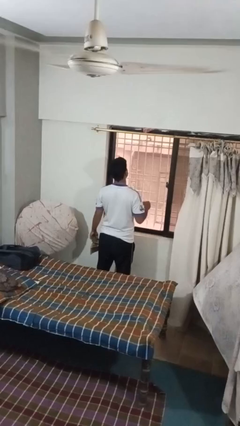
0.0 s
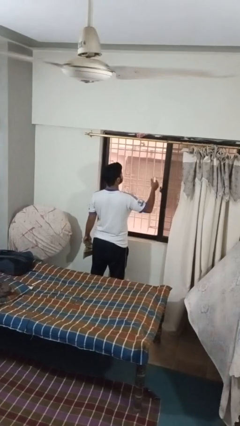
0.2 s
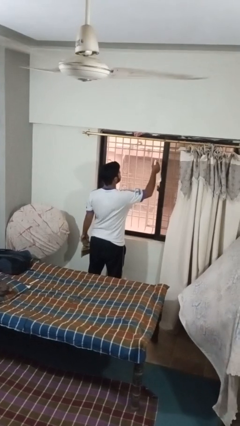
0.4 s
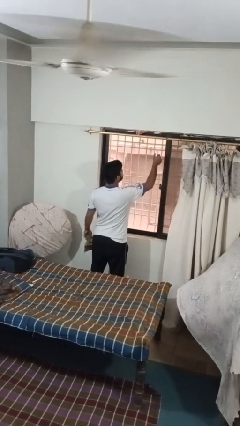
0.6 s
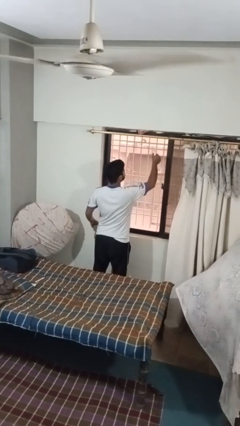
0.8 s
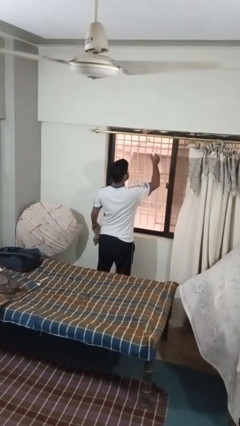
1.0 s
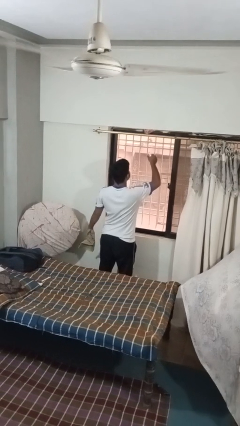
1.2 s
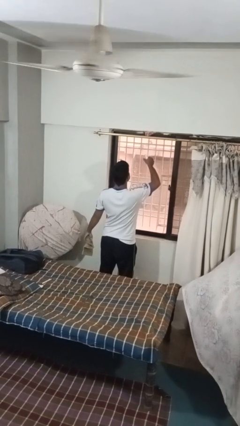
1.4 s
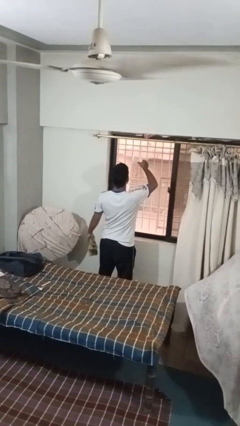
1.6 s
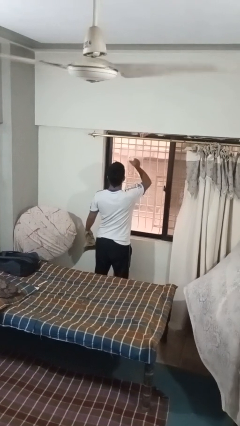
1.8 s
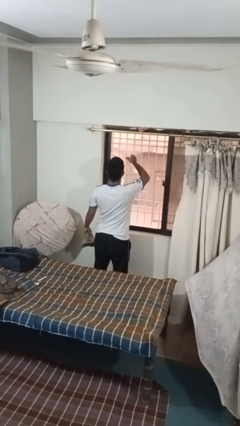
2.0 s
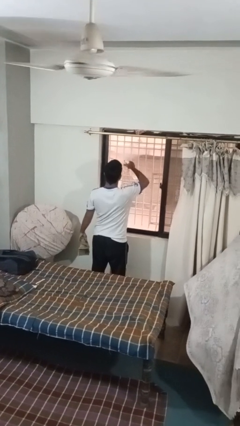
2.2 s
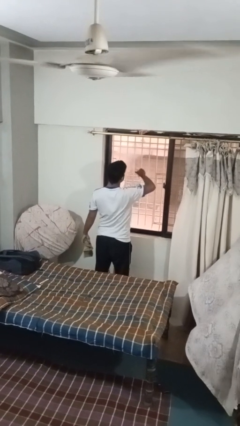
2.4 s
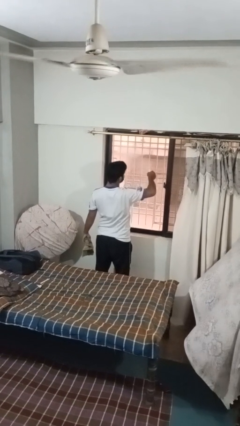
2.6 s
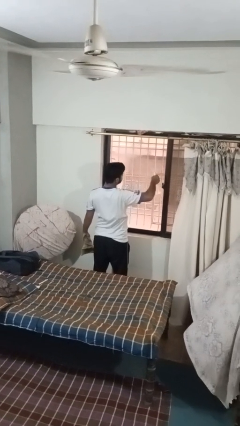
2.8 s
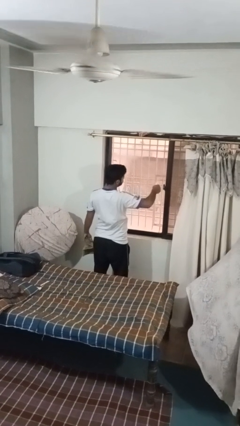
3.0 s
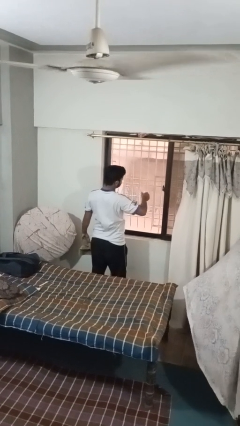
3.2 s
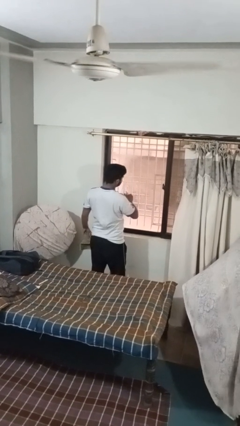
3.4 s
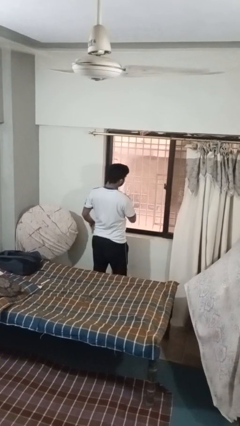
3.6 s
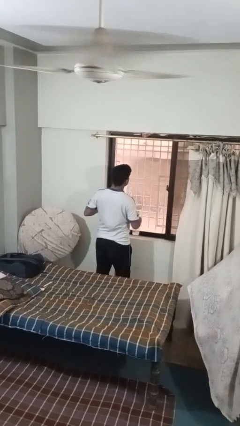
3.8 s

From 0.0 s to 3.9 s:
person sprays from bottle

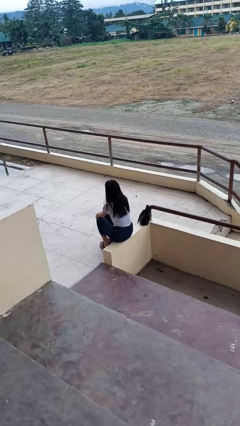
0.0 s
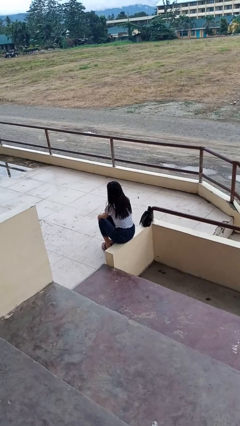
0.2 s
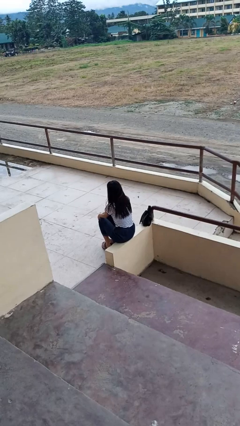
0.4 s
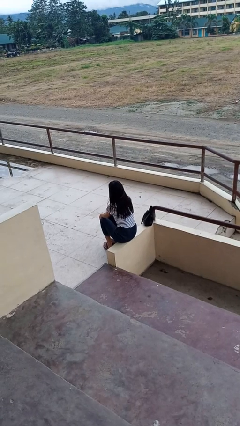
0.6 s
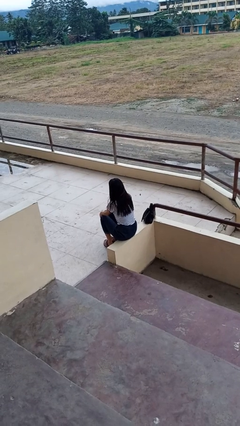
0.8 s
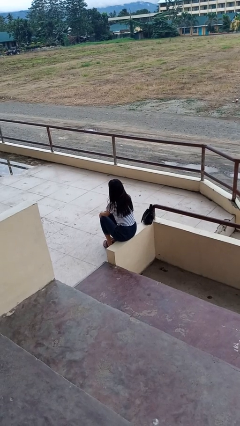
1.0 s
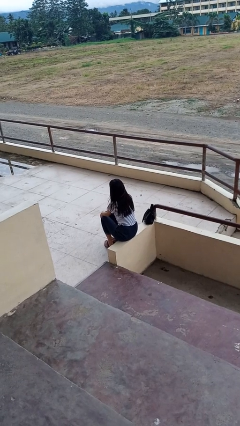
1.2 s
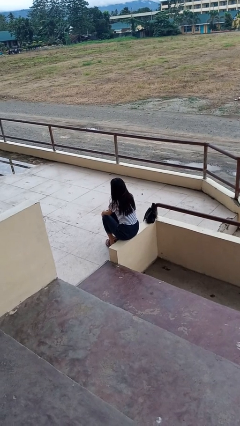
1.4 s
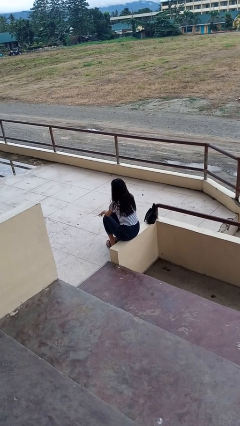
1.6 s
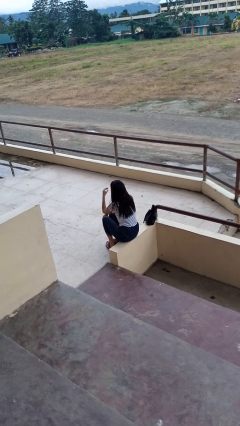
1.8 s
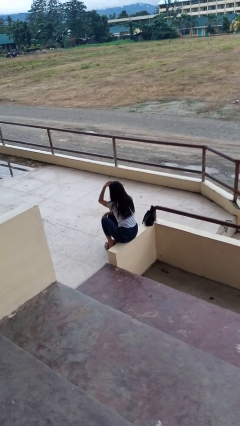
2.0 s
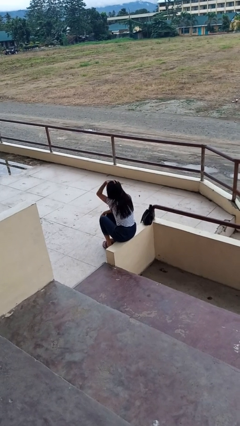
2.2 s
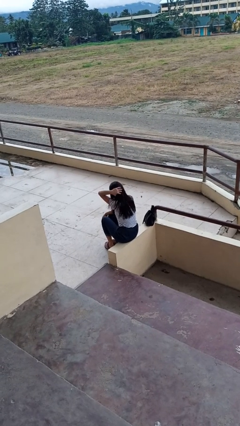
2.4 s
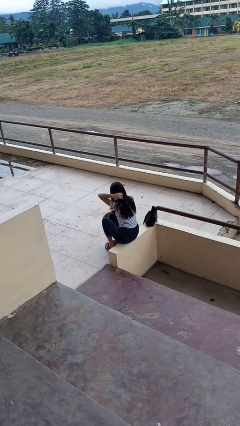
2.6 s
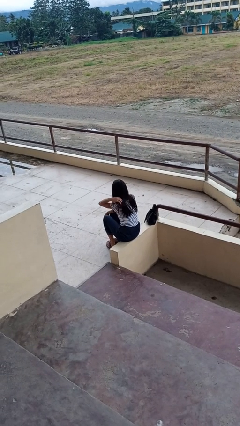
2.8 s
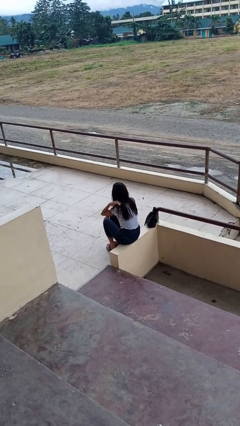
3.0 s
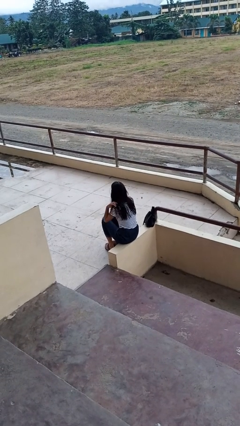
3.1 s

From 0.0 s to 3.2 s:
person strokes hair

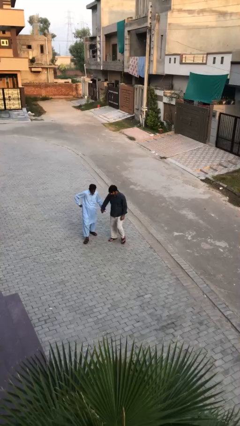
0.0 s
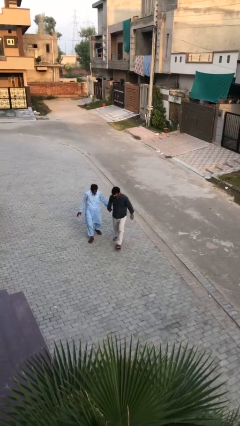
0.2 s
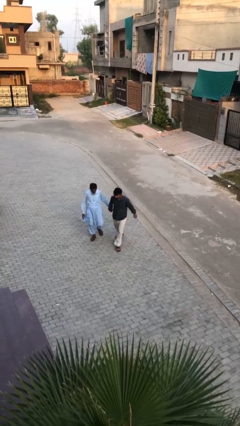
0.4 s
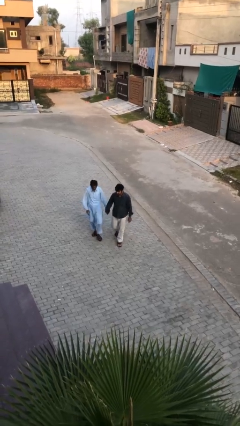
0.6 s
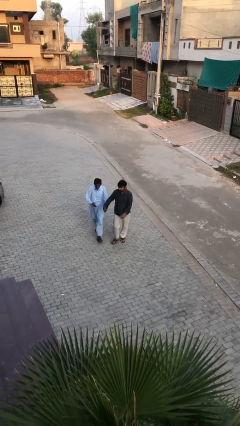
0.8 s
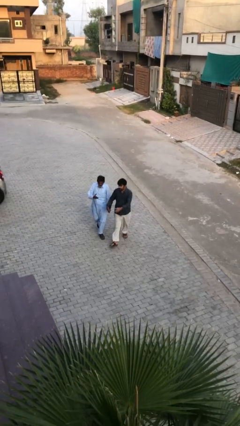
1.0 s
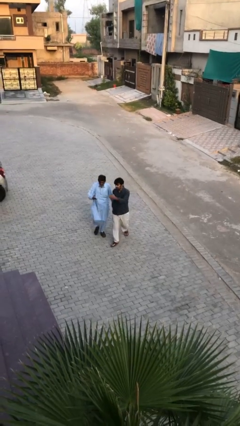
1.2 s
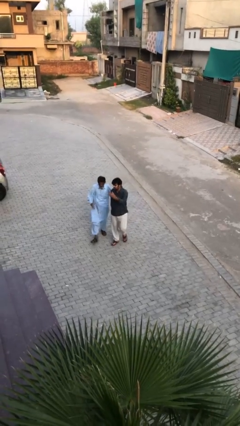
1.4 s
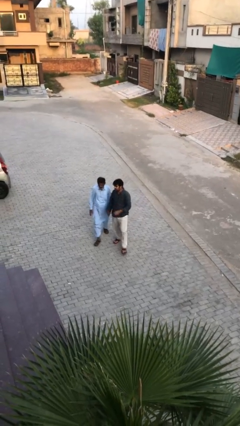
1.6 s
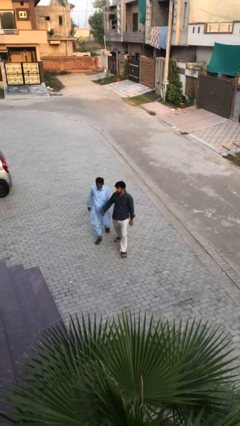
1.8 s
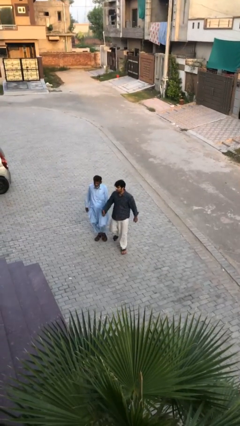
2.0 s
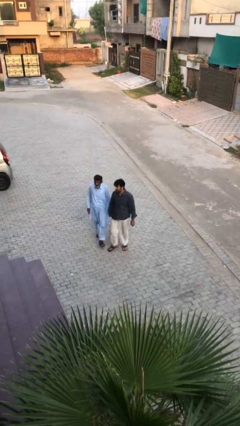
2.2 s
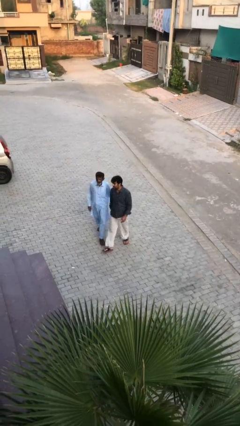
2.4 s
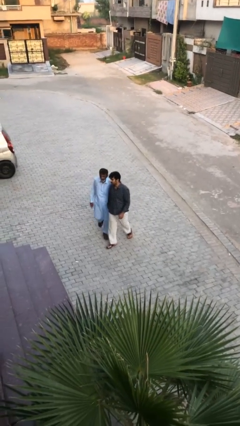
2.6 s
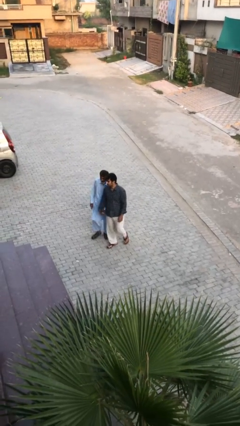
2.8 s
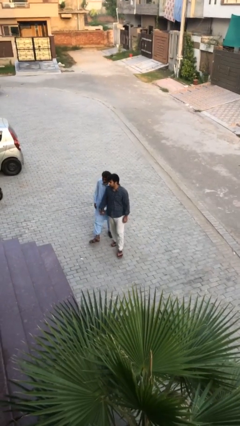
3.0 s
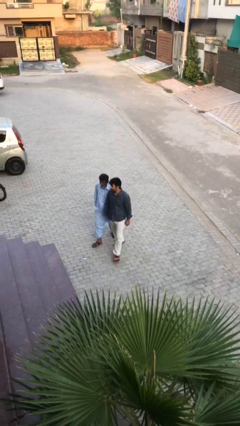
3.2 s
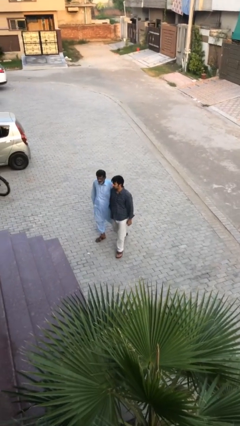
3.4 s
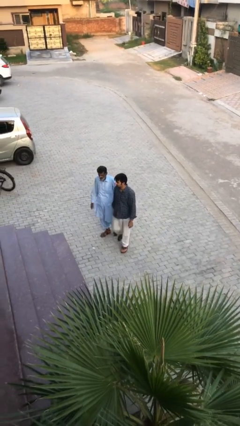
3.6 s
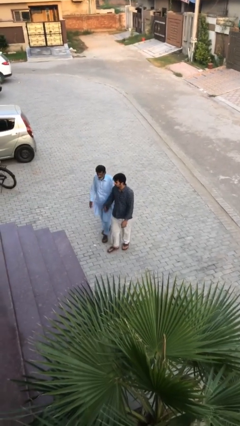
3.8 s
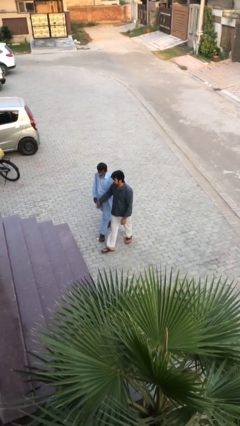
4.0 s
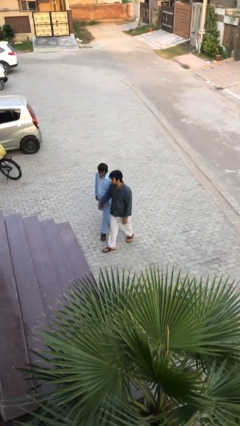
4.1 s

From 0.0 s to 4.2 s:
person holds hand

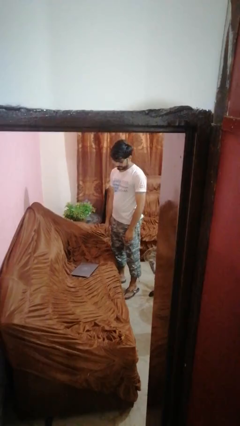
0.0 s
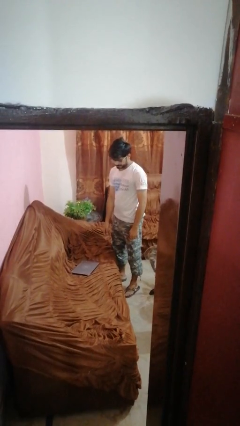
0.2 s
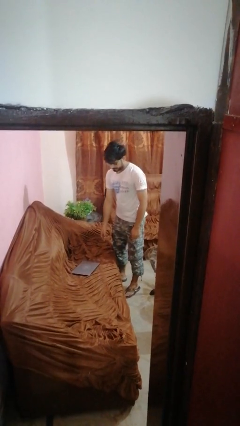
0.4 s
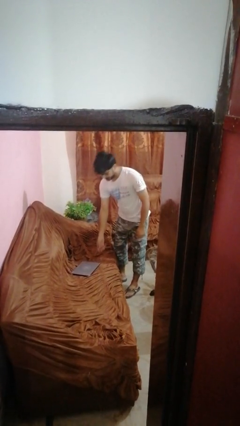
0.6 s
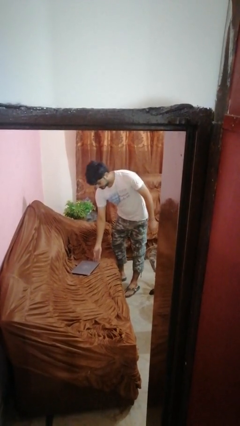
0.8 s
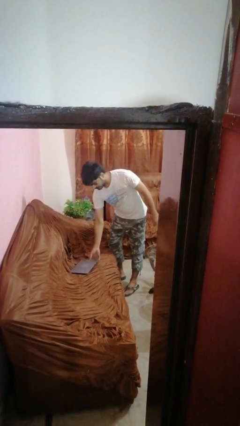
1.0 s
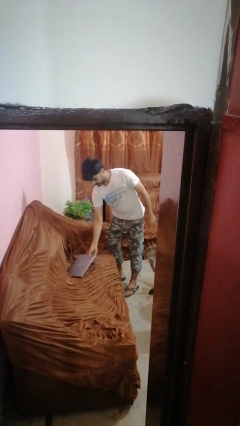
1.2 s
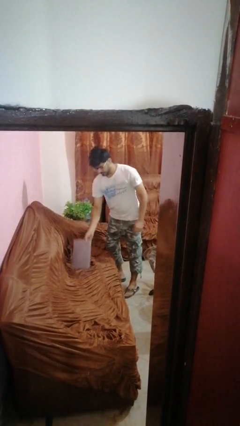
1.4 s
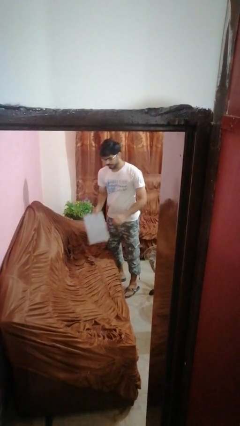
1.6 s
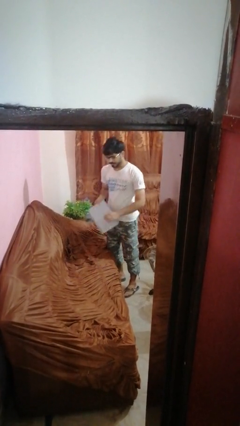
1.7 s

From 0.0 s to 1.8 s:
person picks up object from couch

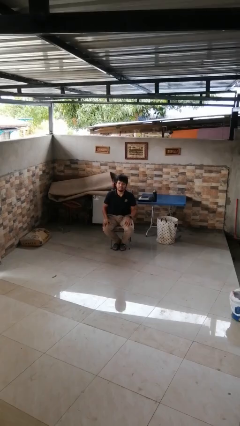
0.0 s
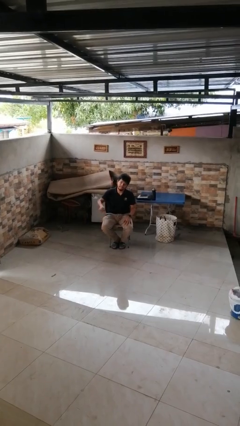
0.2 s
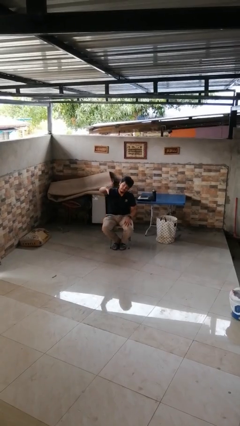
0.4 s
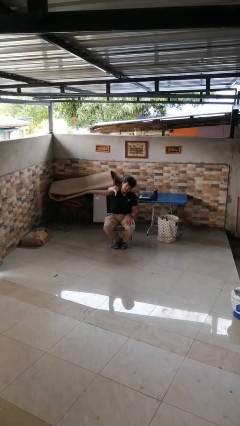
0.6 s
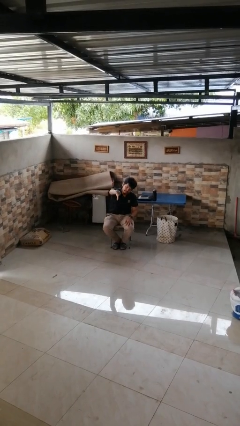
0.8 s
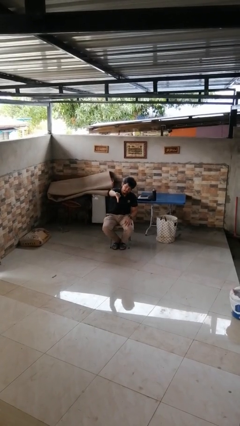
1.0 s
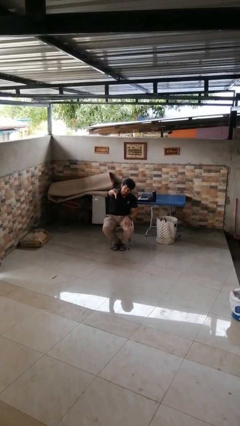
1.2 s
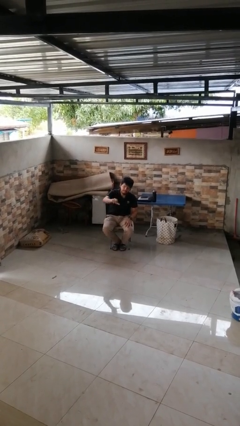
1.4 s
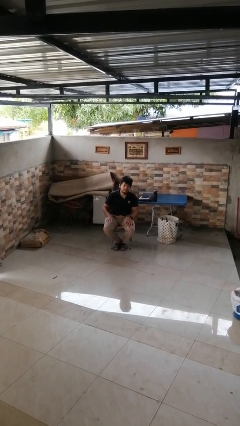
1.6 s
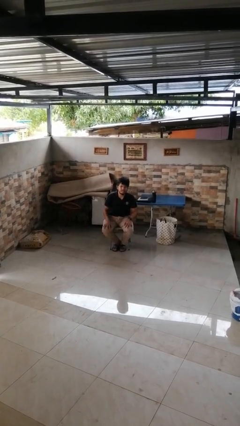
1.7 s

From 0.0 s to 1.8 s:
person gestures thumbs down

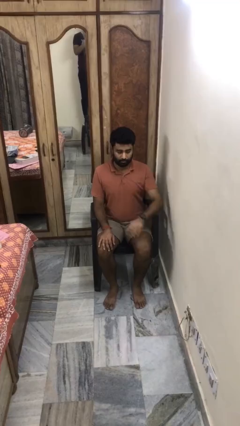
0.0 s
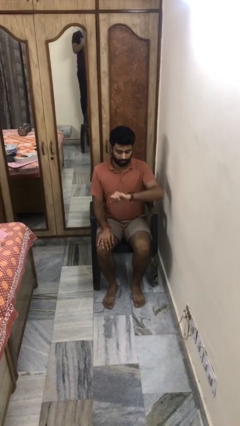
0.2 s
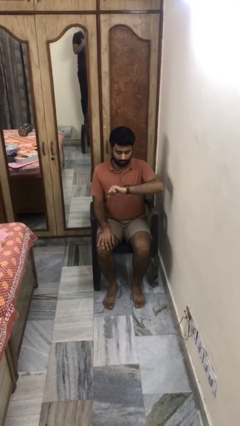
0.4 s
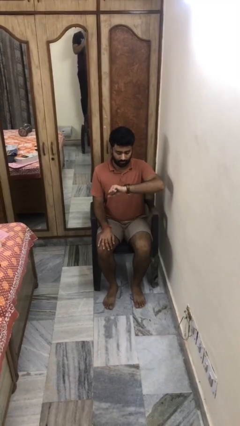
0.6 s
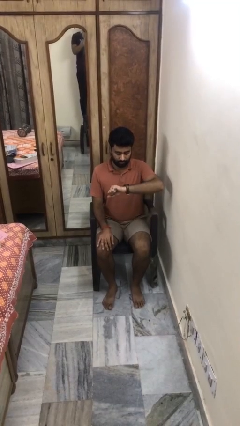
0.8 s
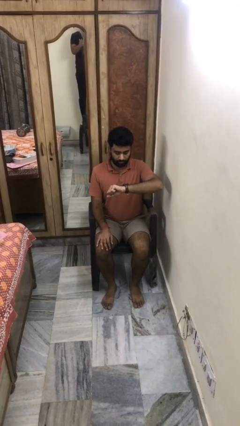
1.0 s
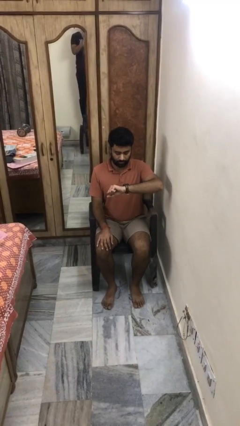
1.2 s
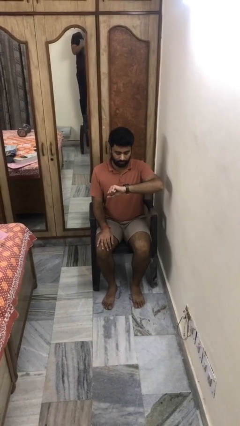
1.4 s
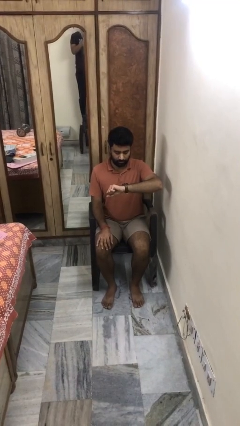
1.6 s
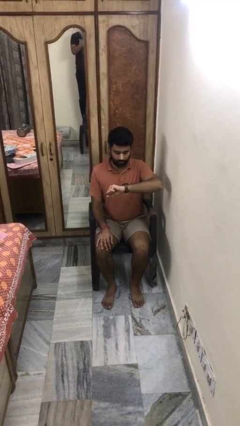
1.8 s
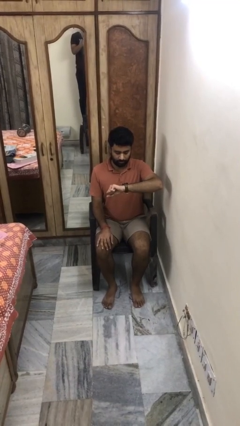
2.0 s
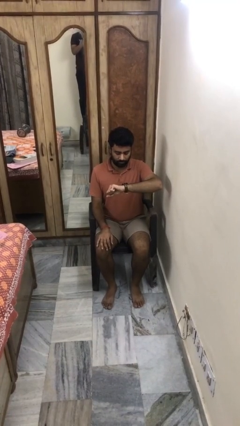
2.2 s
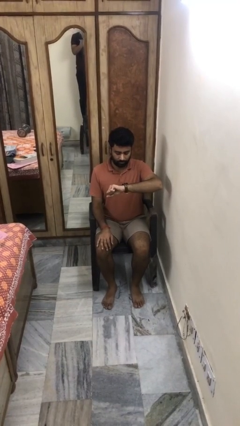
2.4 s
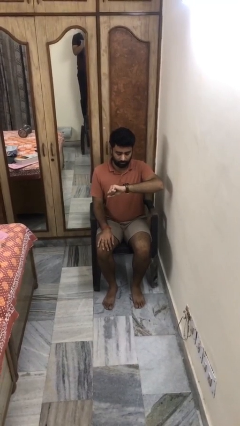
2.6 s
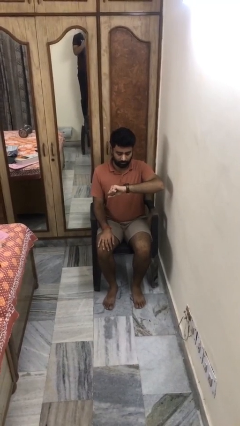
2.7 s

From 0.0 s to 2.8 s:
person looks at wristwatch

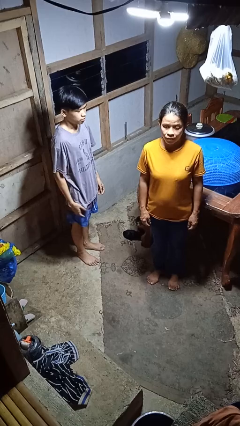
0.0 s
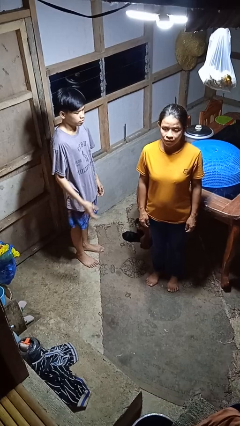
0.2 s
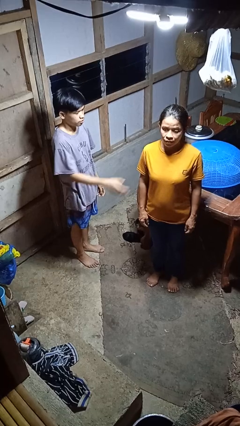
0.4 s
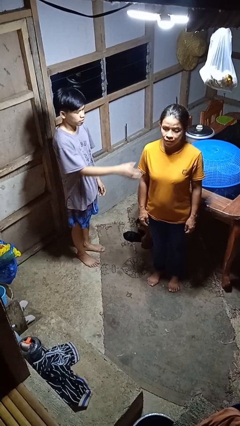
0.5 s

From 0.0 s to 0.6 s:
person grabs person by bicep
